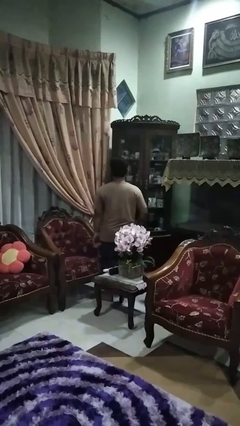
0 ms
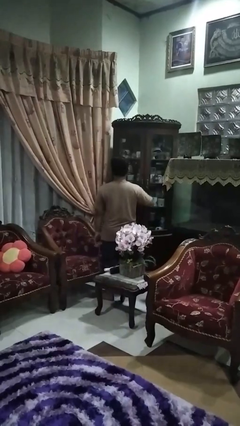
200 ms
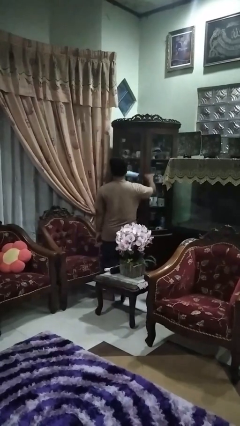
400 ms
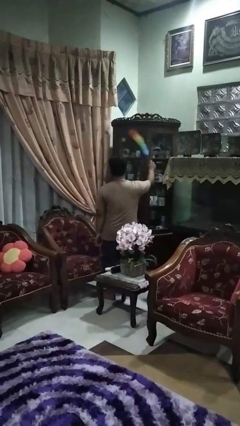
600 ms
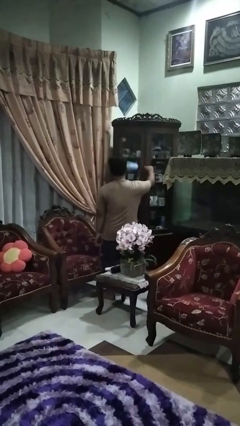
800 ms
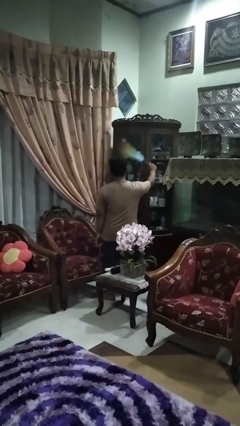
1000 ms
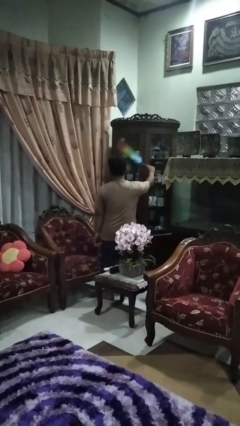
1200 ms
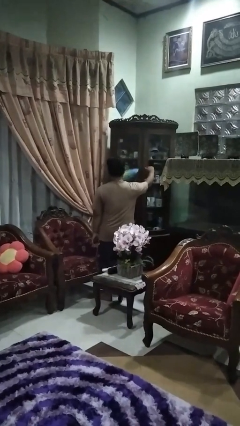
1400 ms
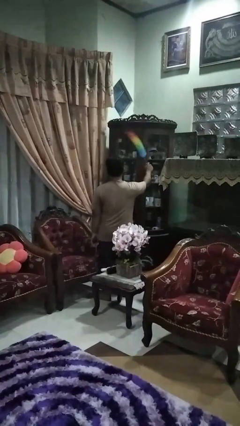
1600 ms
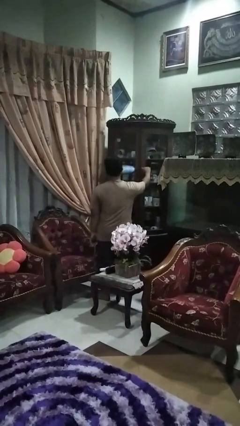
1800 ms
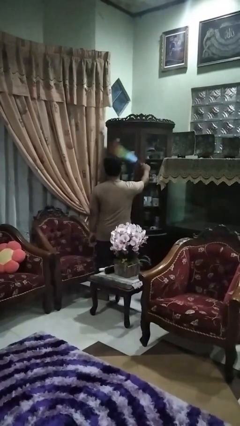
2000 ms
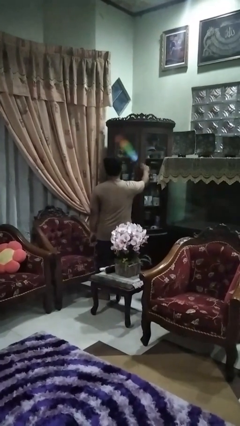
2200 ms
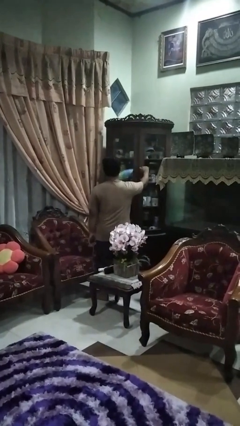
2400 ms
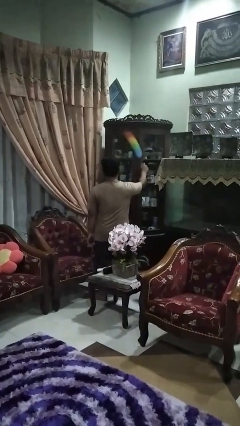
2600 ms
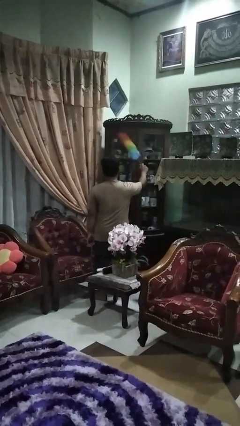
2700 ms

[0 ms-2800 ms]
person dusts furniture

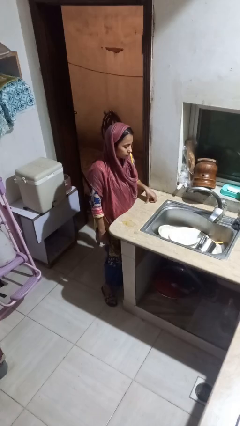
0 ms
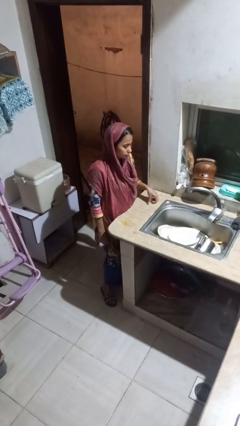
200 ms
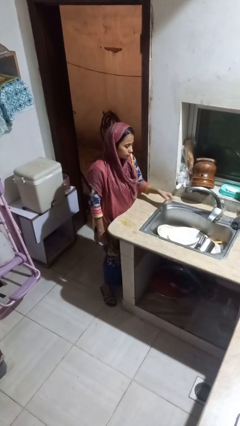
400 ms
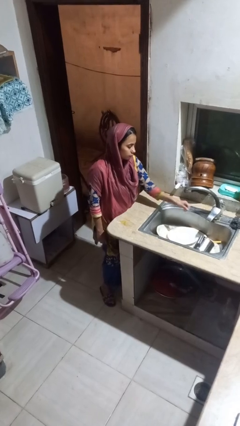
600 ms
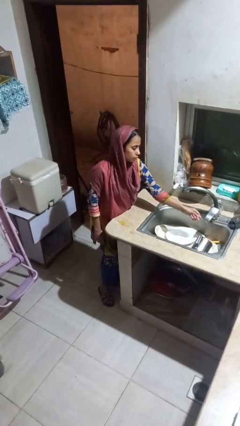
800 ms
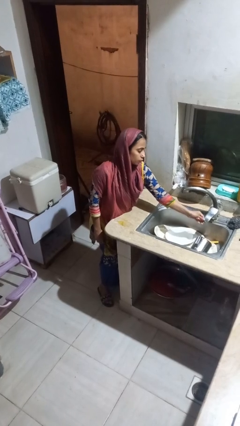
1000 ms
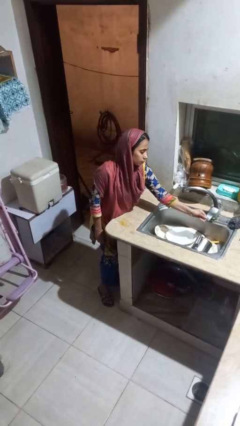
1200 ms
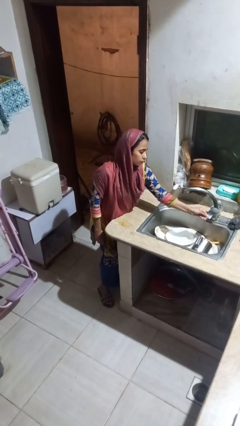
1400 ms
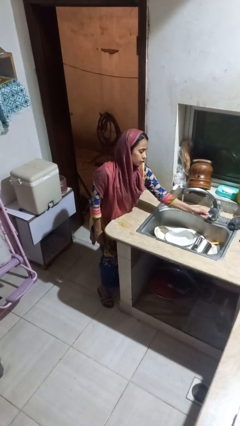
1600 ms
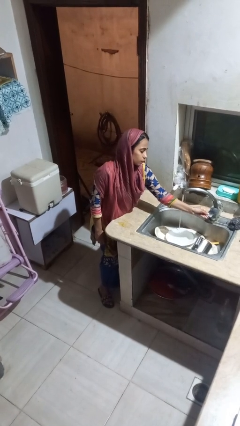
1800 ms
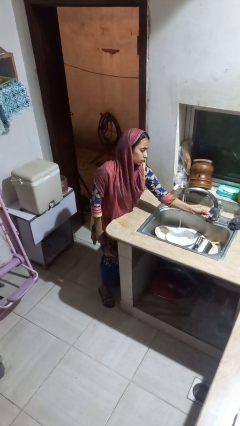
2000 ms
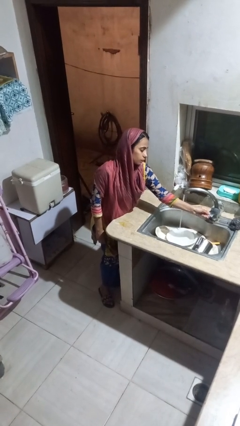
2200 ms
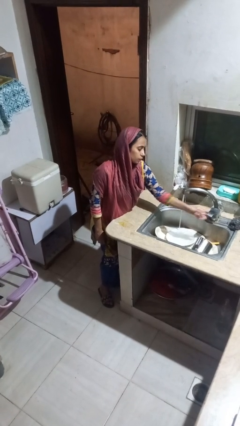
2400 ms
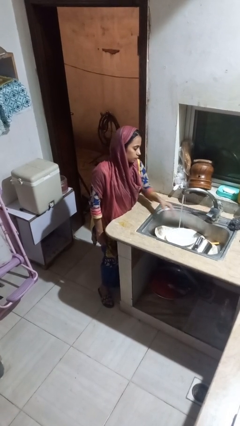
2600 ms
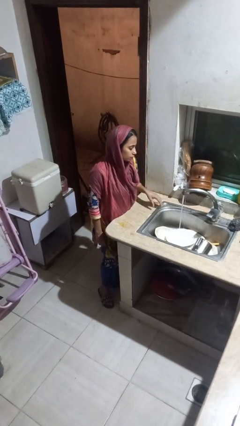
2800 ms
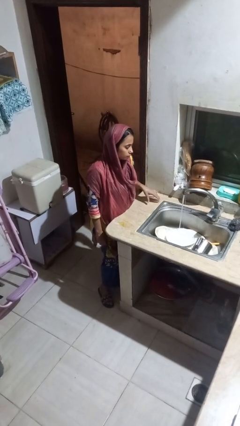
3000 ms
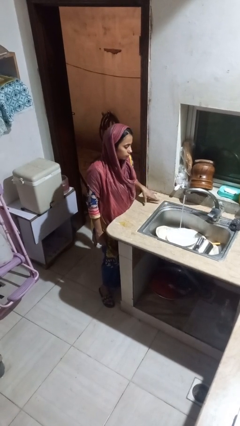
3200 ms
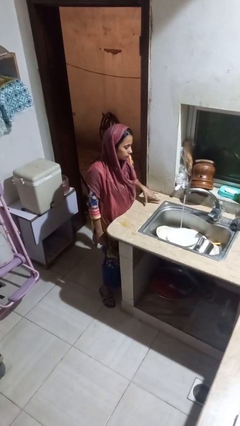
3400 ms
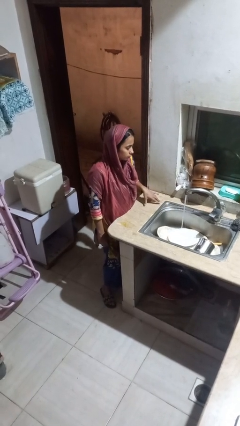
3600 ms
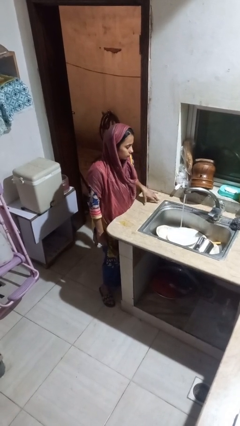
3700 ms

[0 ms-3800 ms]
person turns on faucet

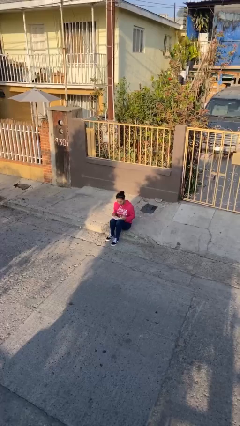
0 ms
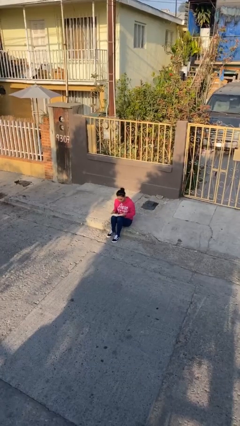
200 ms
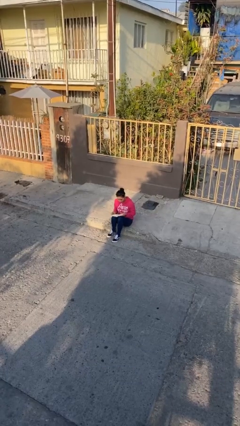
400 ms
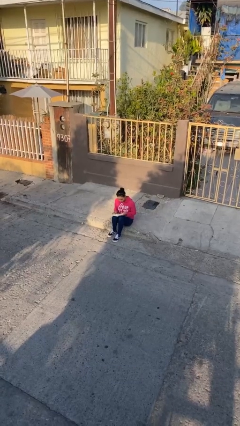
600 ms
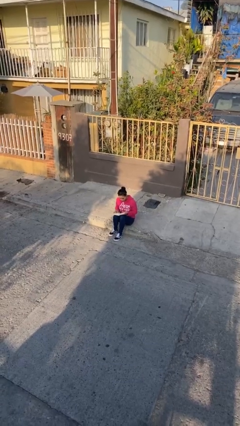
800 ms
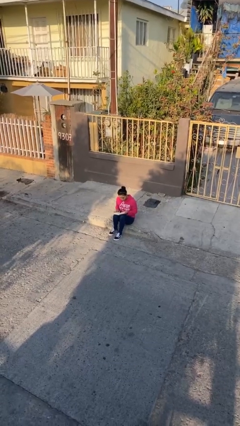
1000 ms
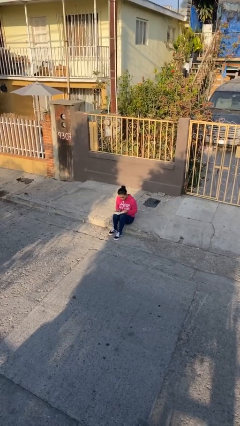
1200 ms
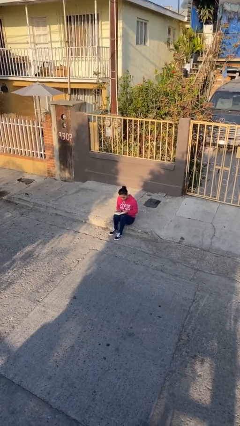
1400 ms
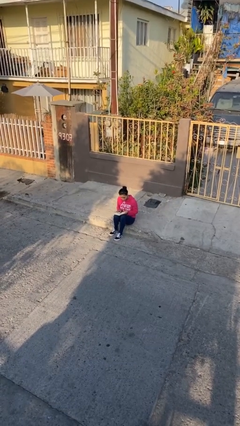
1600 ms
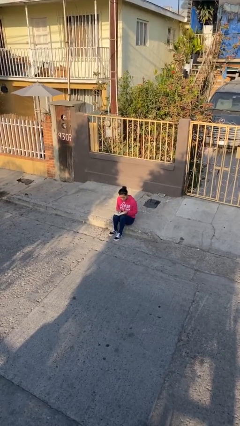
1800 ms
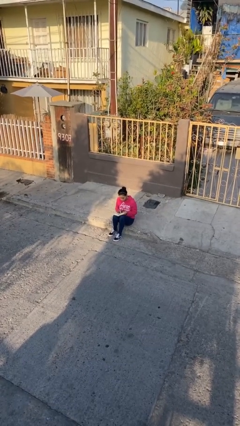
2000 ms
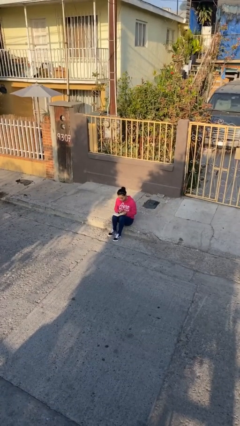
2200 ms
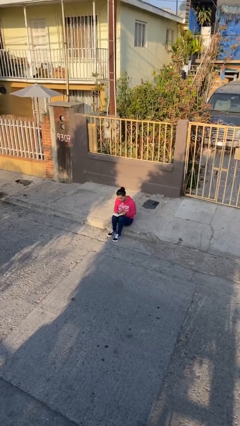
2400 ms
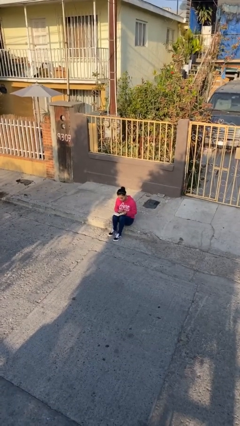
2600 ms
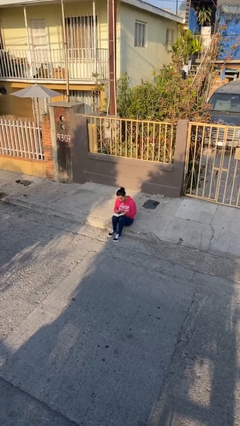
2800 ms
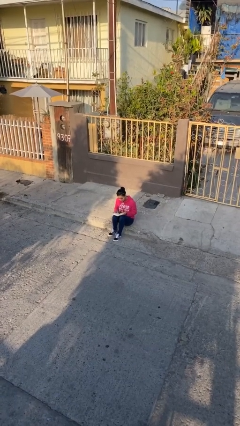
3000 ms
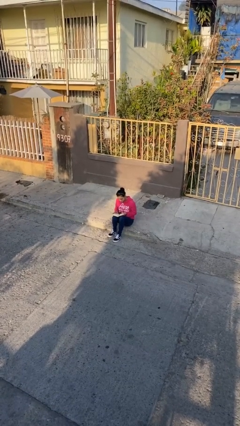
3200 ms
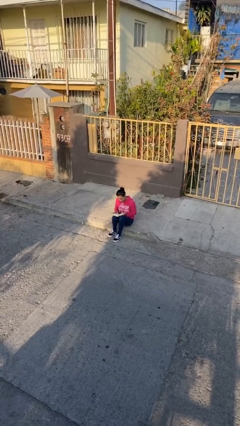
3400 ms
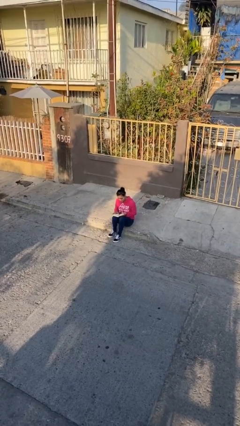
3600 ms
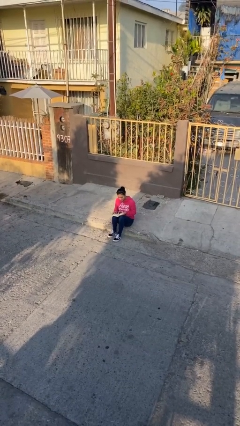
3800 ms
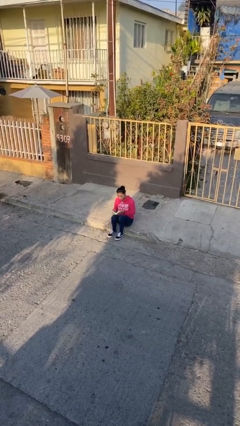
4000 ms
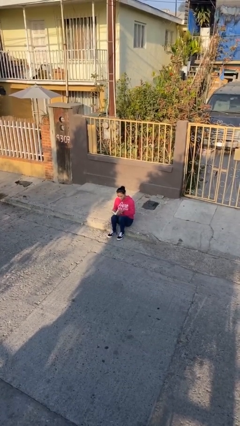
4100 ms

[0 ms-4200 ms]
person reads document

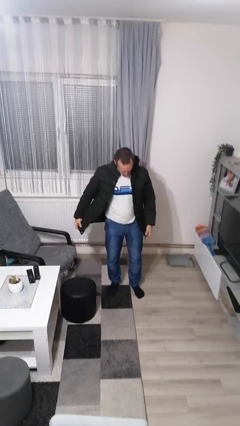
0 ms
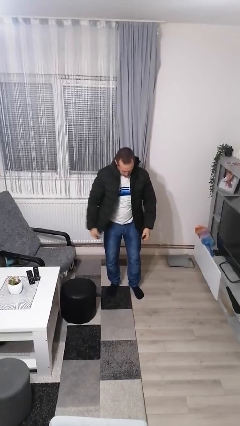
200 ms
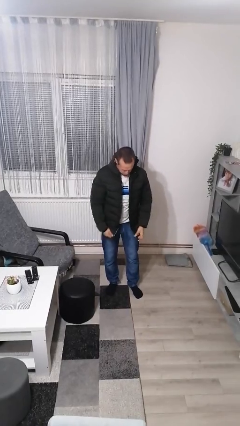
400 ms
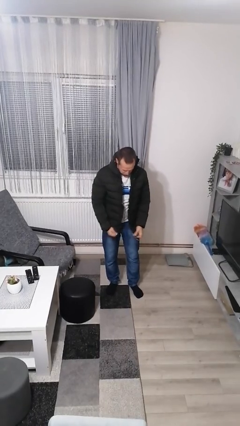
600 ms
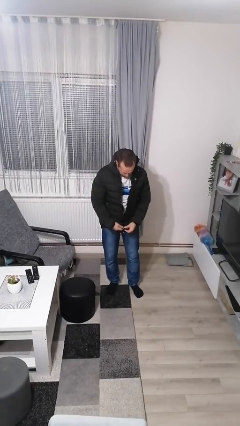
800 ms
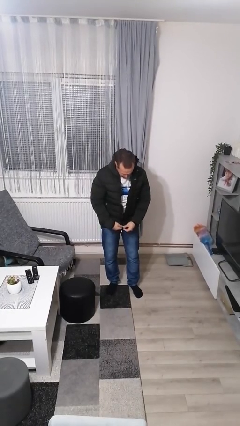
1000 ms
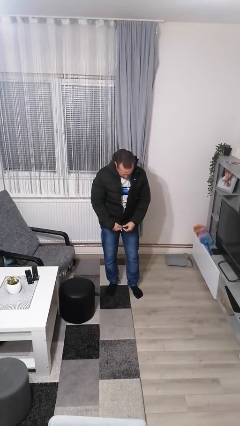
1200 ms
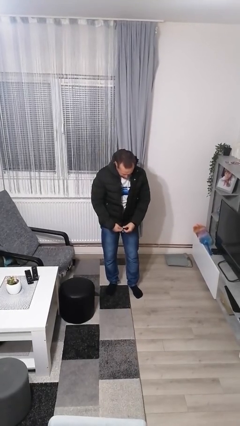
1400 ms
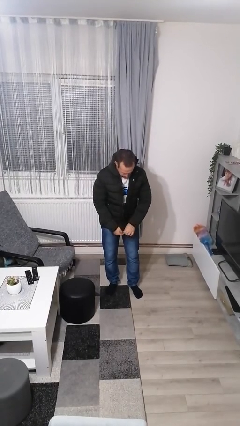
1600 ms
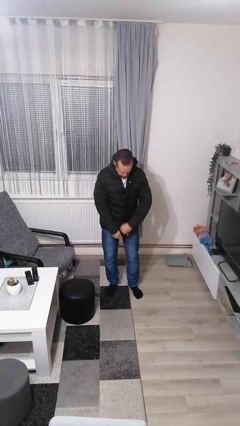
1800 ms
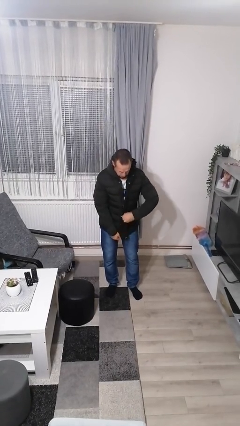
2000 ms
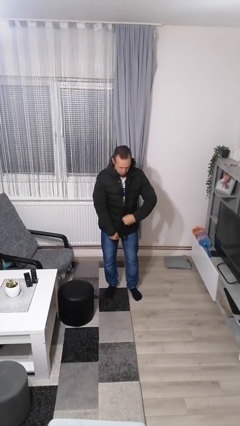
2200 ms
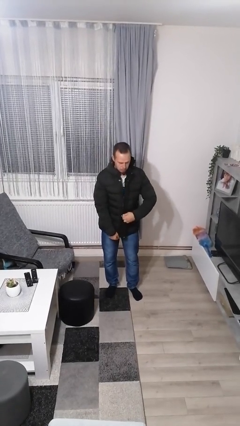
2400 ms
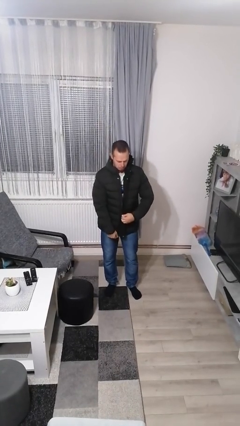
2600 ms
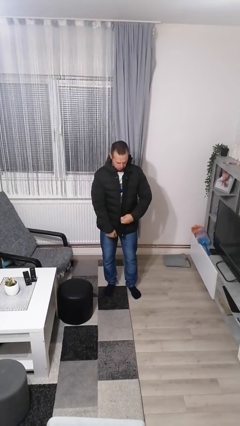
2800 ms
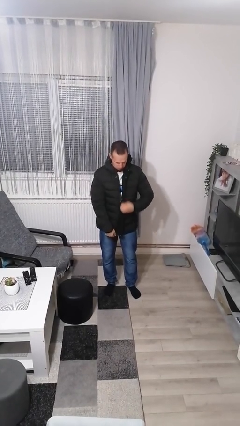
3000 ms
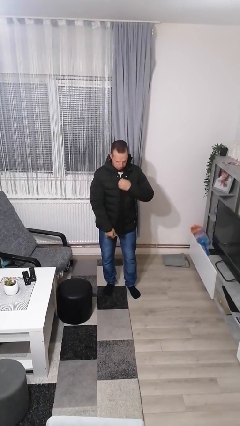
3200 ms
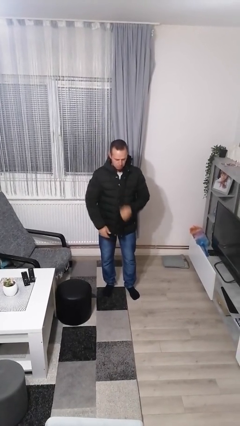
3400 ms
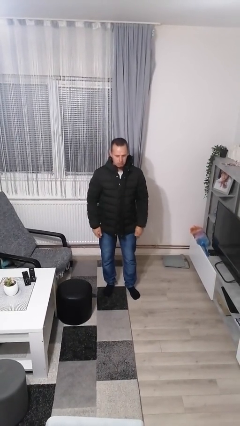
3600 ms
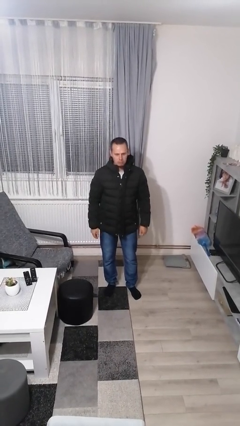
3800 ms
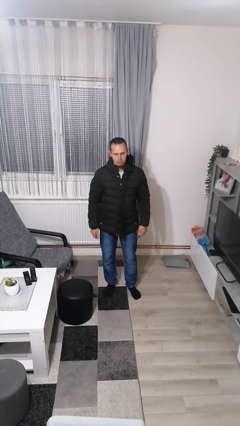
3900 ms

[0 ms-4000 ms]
person zips up jacket

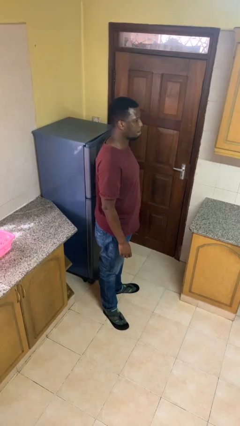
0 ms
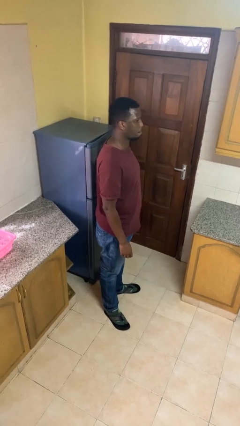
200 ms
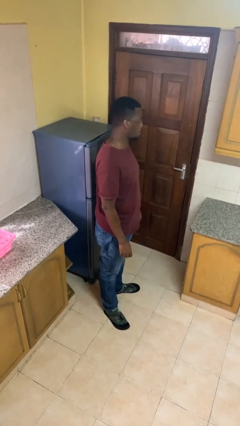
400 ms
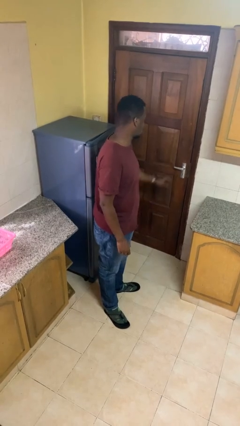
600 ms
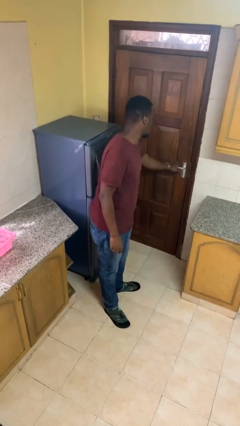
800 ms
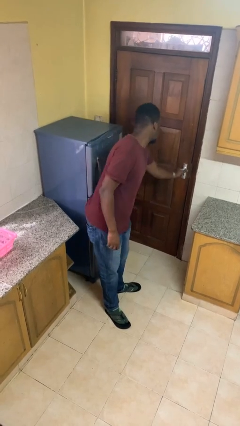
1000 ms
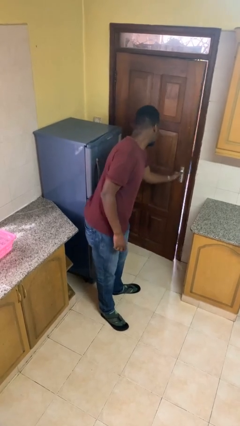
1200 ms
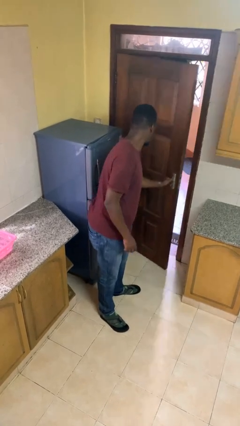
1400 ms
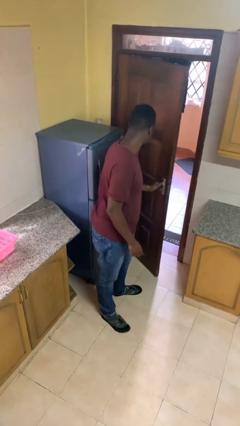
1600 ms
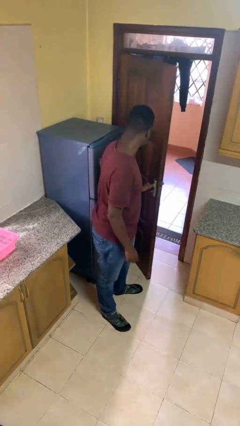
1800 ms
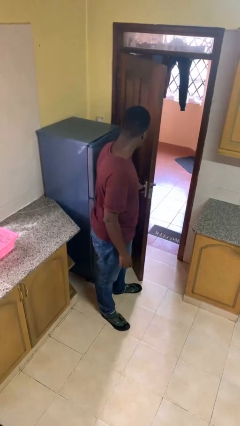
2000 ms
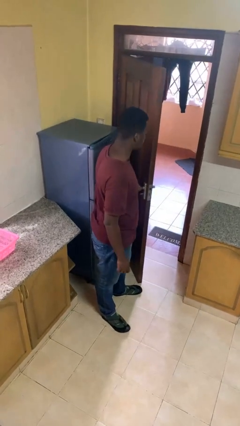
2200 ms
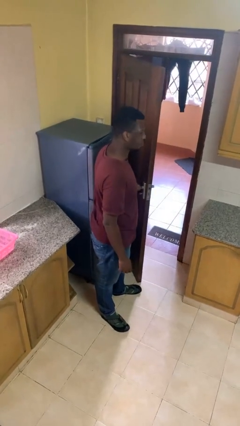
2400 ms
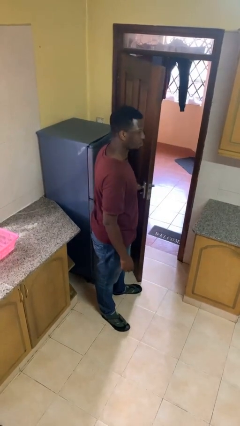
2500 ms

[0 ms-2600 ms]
person opens facility door
